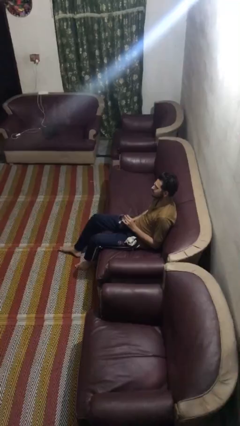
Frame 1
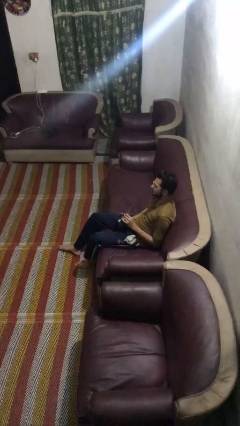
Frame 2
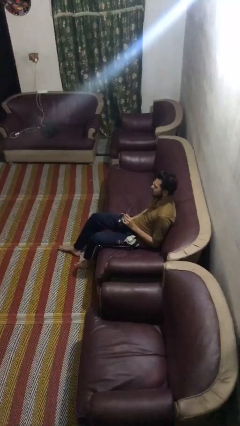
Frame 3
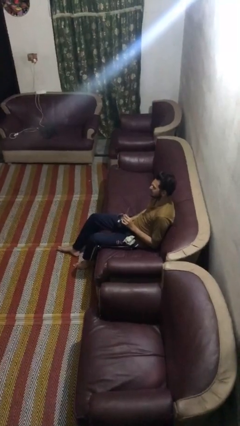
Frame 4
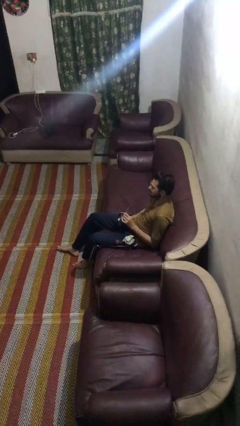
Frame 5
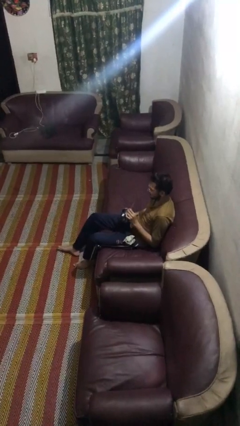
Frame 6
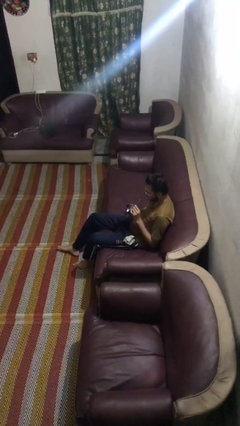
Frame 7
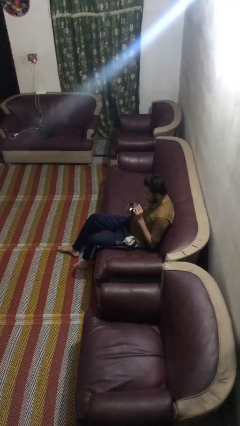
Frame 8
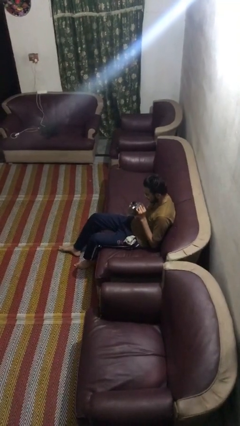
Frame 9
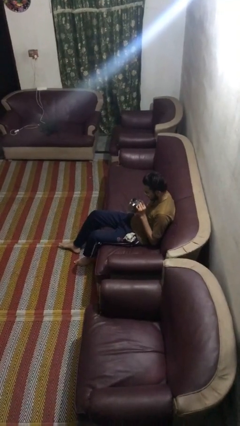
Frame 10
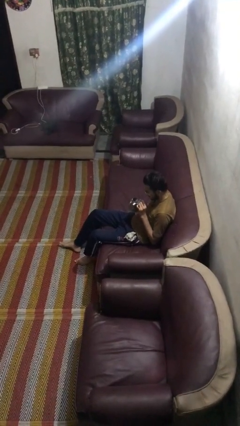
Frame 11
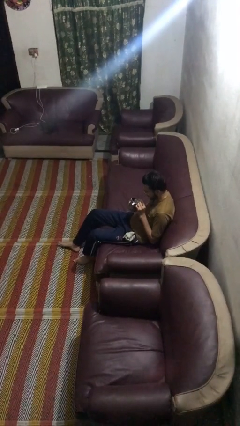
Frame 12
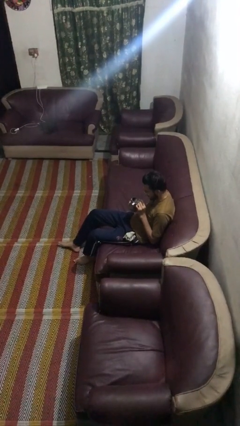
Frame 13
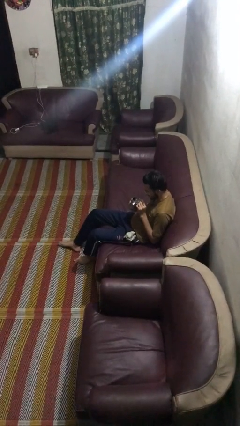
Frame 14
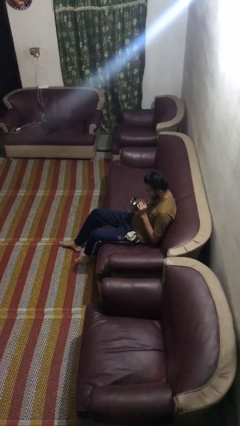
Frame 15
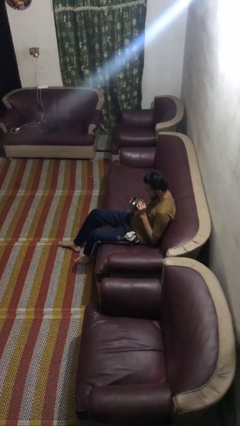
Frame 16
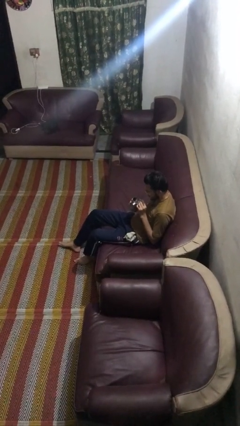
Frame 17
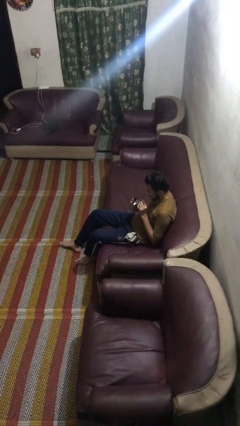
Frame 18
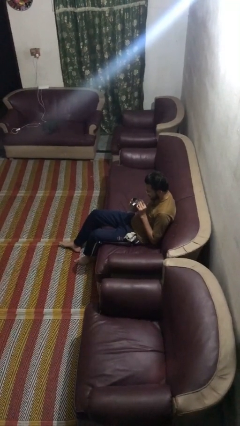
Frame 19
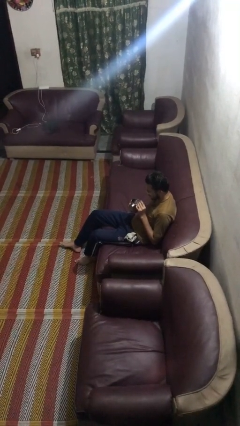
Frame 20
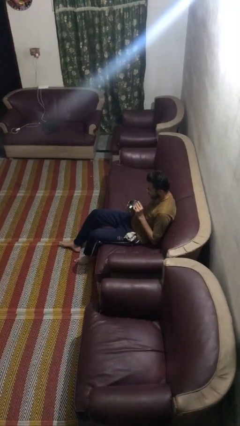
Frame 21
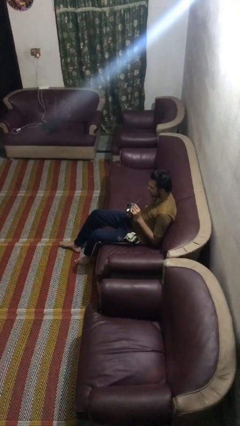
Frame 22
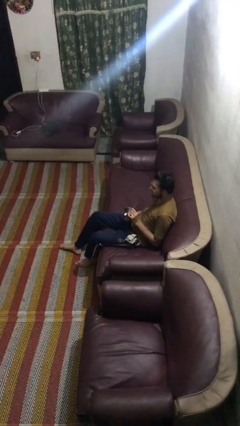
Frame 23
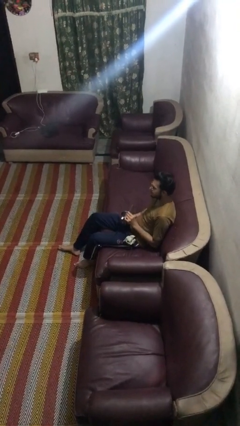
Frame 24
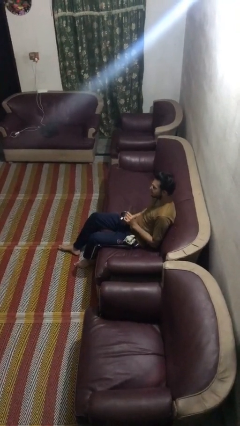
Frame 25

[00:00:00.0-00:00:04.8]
person drinks from straw

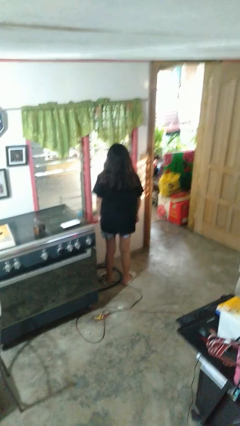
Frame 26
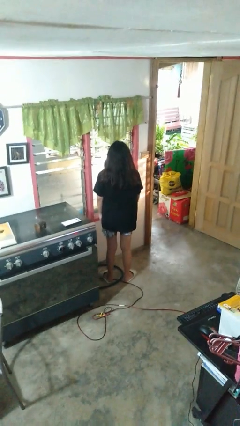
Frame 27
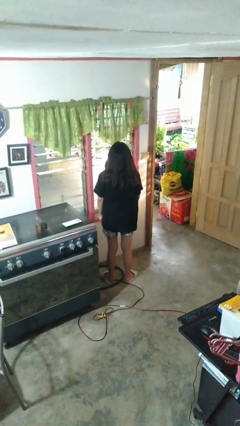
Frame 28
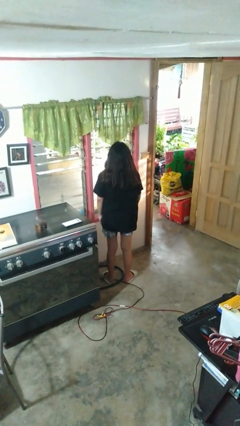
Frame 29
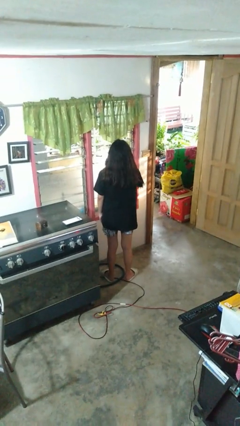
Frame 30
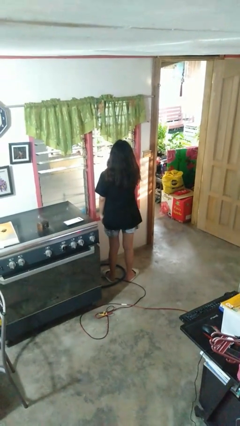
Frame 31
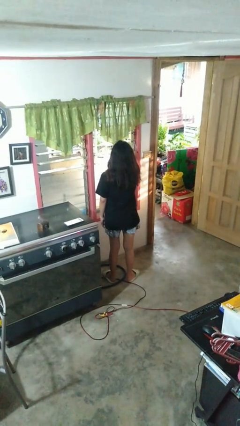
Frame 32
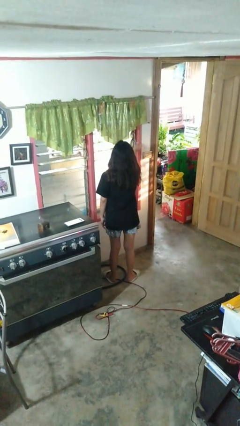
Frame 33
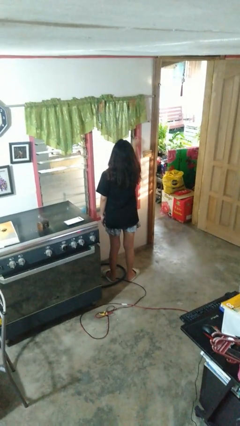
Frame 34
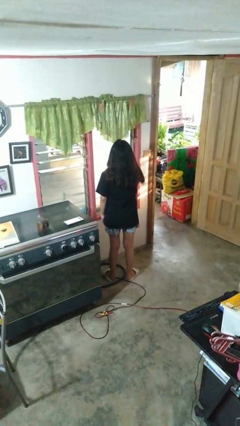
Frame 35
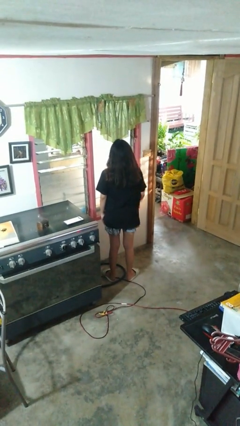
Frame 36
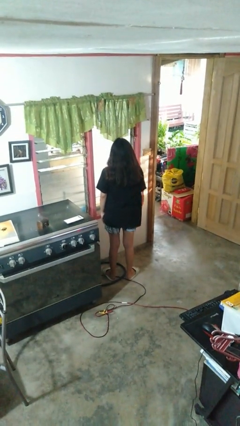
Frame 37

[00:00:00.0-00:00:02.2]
person closes home window

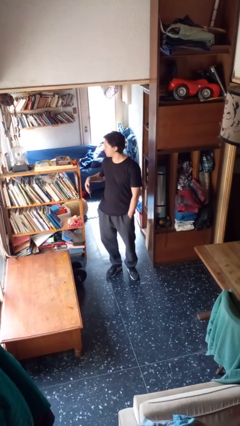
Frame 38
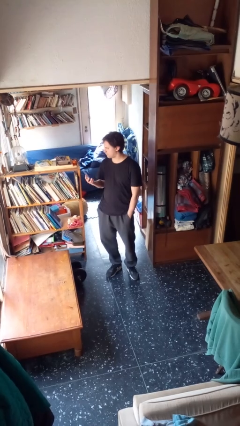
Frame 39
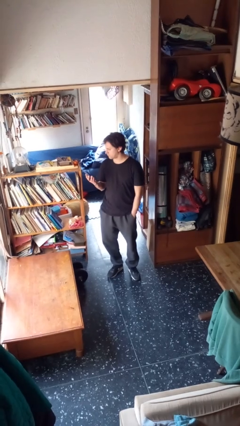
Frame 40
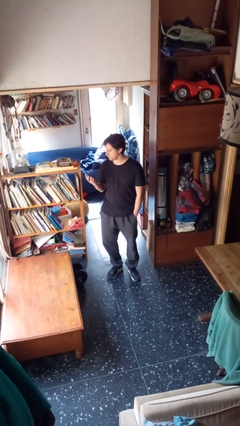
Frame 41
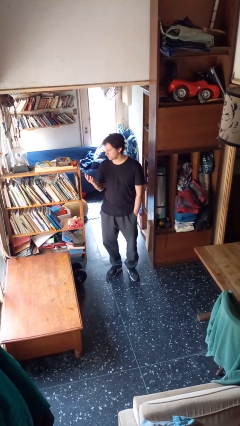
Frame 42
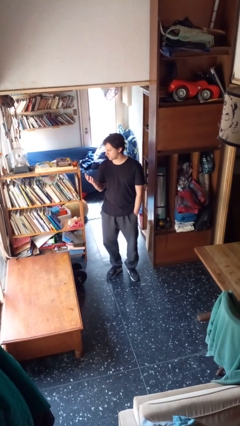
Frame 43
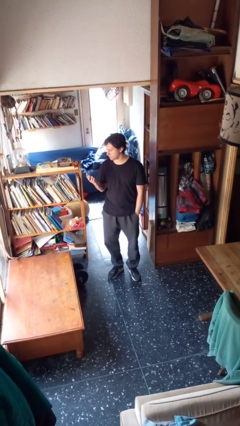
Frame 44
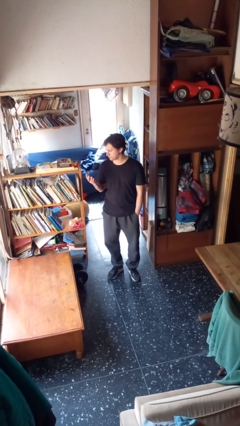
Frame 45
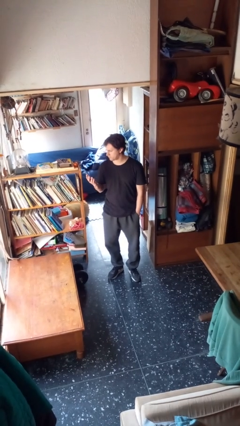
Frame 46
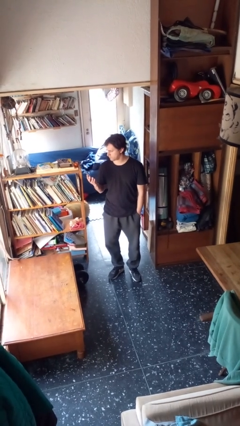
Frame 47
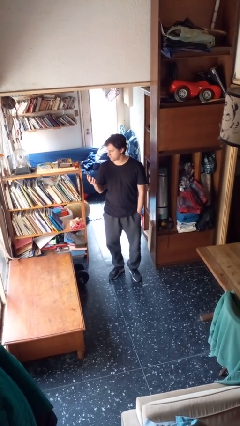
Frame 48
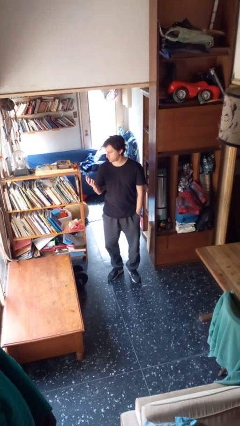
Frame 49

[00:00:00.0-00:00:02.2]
person takes phone from pocket

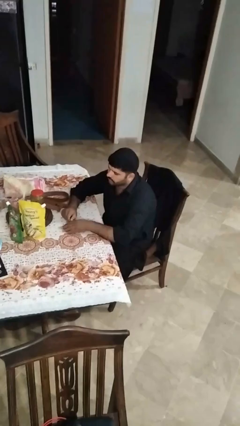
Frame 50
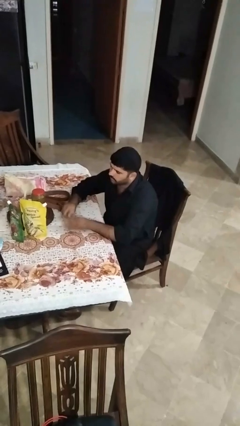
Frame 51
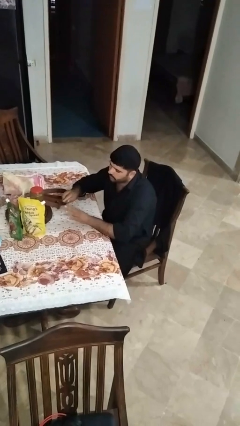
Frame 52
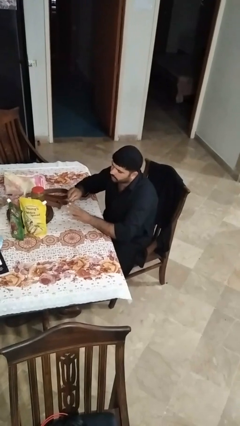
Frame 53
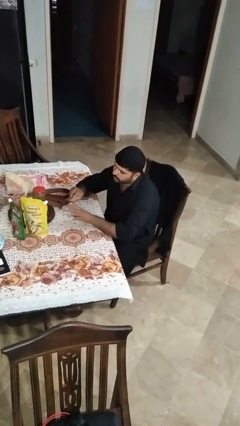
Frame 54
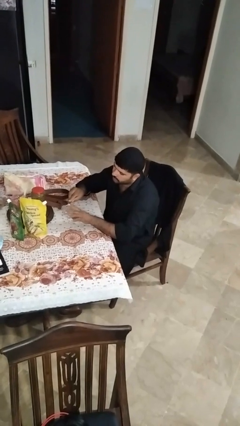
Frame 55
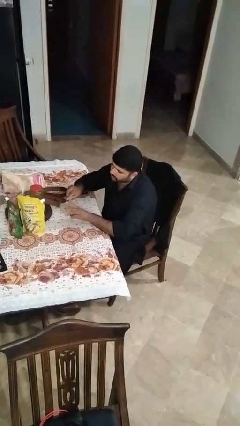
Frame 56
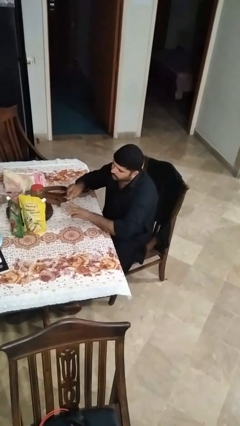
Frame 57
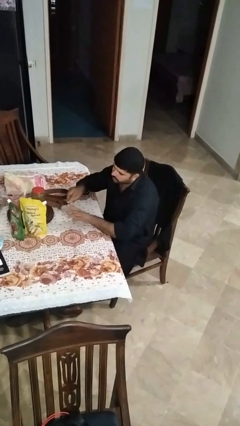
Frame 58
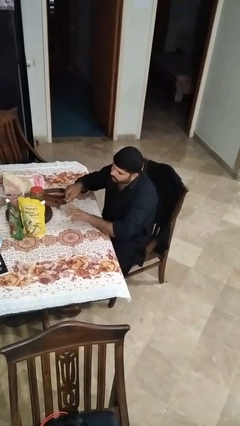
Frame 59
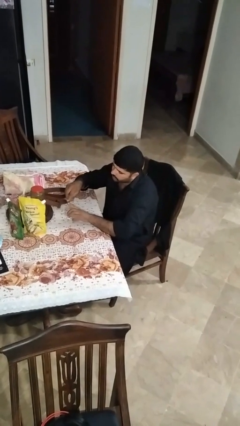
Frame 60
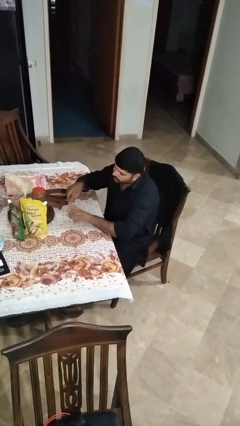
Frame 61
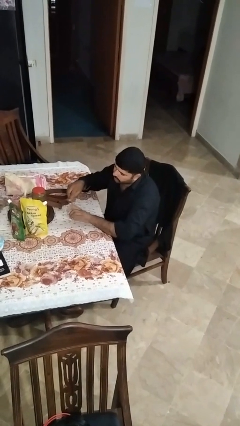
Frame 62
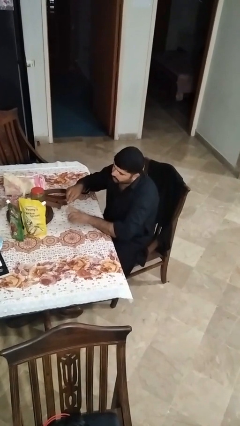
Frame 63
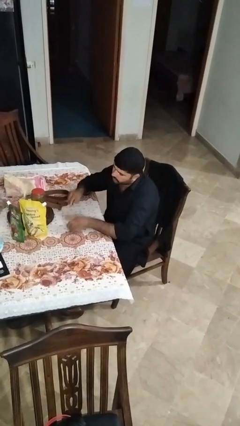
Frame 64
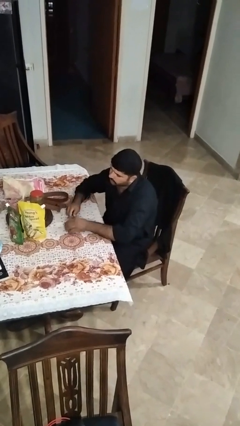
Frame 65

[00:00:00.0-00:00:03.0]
person files fingernails

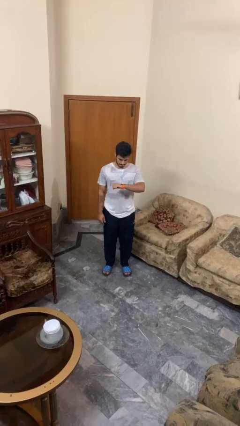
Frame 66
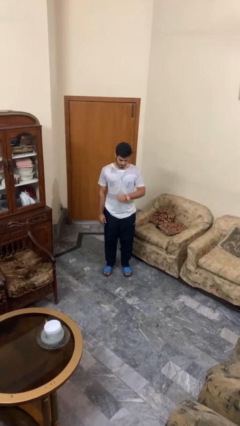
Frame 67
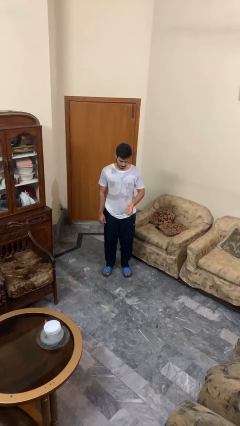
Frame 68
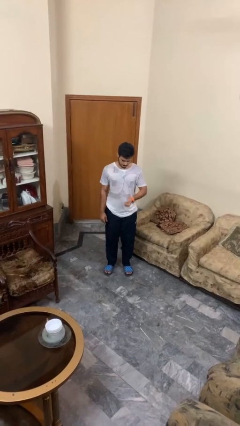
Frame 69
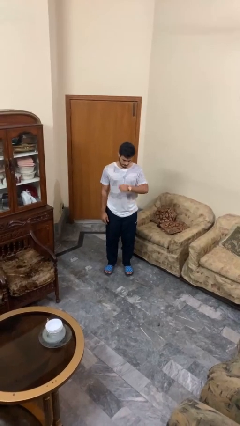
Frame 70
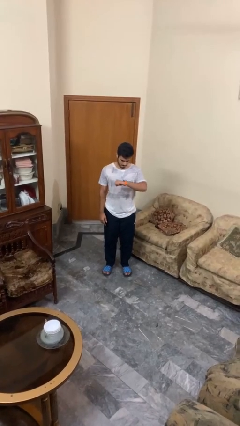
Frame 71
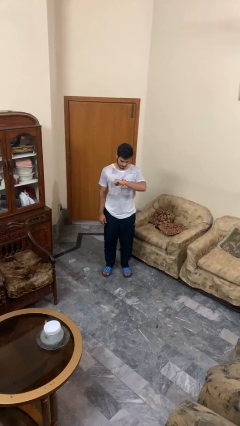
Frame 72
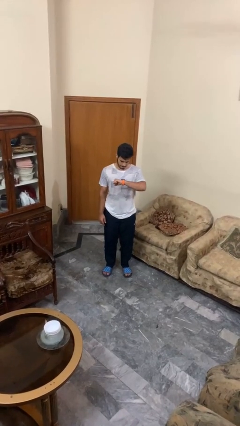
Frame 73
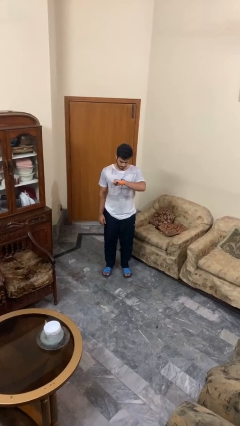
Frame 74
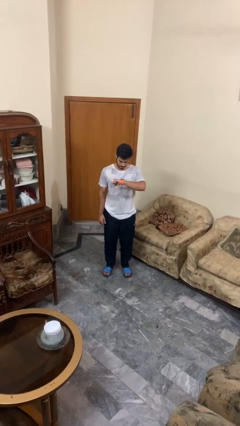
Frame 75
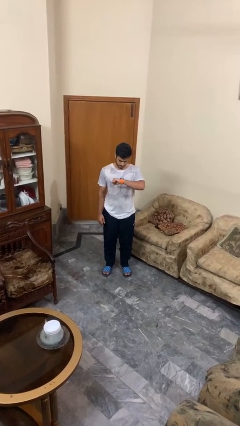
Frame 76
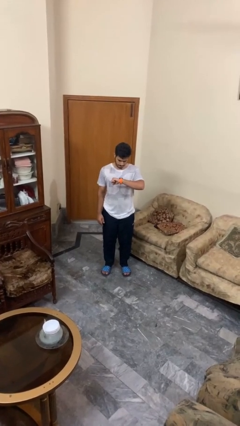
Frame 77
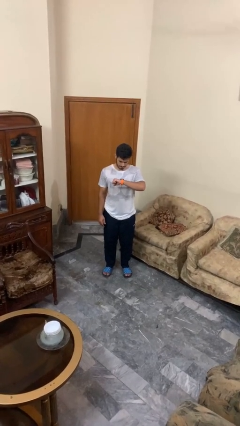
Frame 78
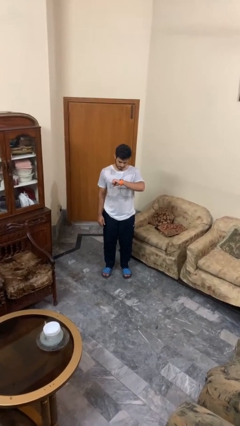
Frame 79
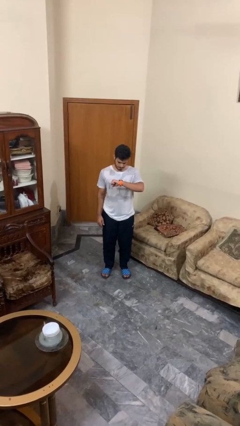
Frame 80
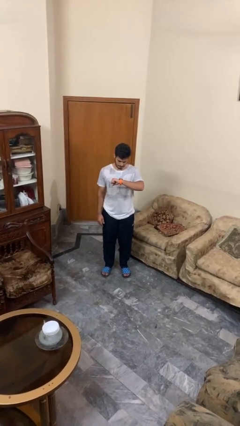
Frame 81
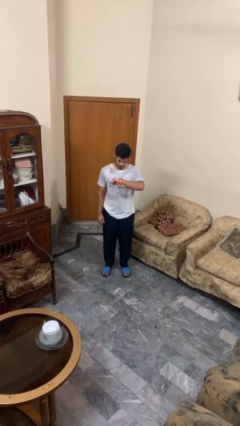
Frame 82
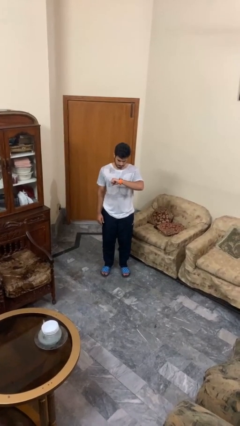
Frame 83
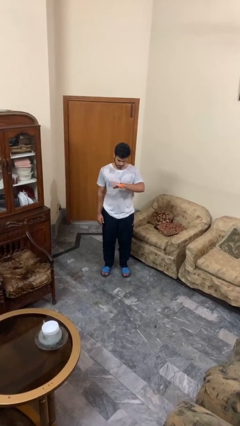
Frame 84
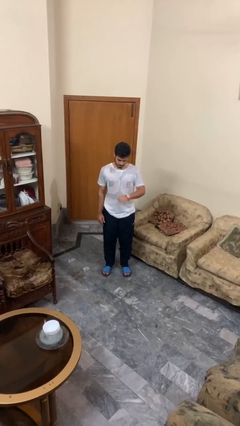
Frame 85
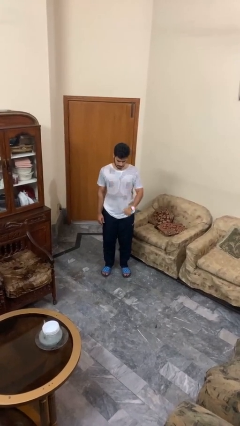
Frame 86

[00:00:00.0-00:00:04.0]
person looks at wristwatch

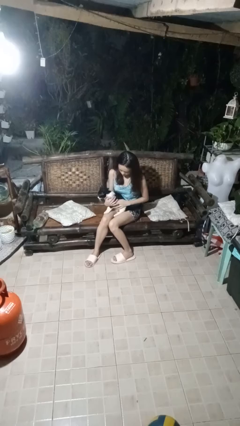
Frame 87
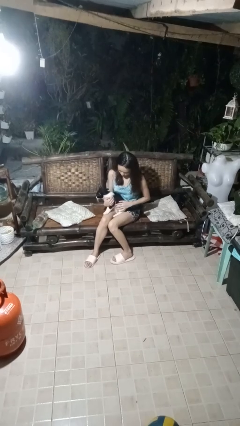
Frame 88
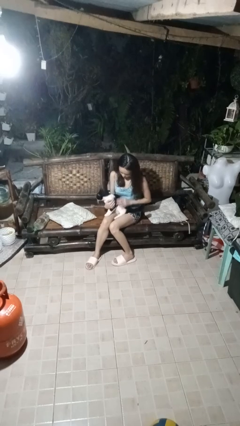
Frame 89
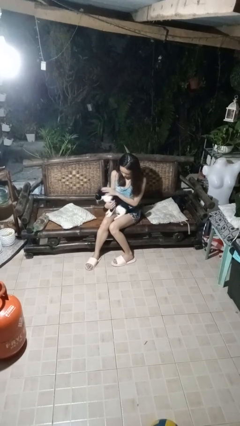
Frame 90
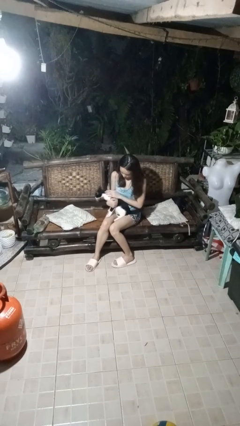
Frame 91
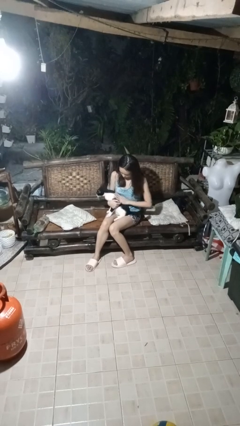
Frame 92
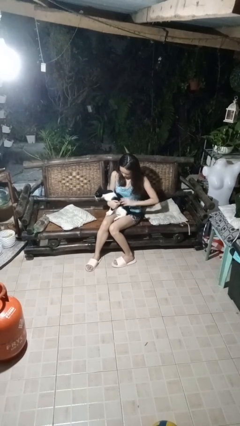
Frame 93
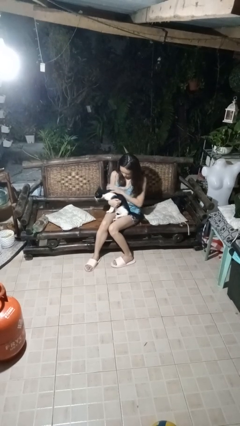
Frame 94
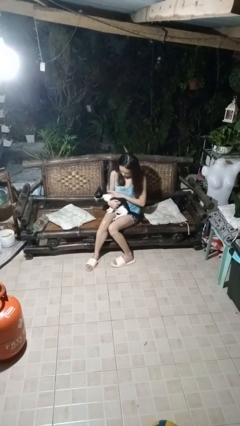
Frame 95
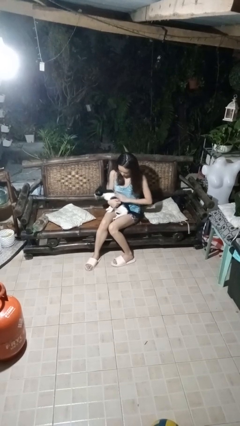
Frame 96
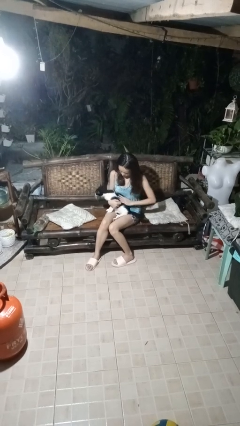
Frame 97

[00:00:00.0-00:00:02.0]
person pets cat
